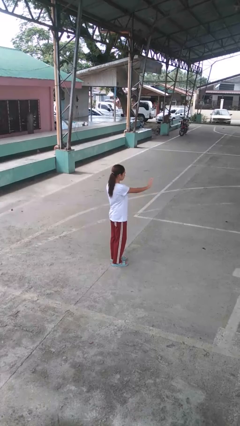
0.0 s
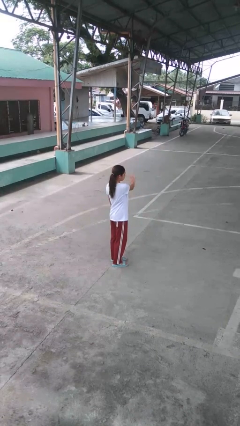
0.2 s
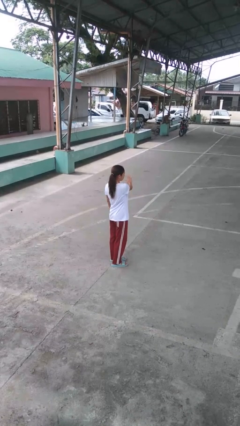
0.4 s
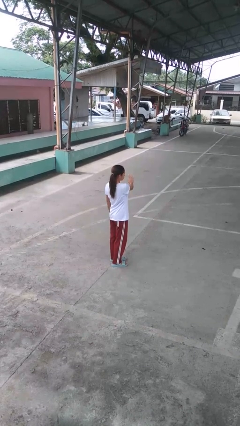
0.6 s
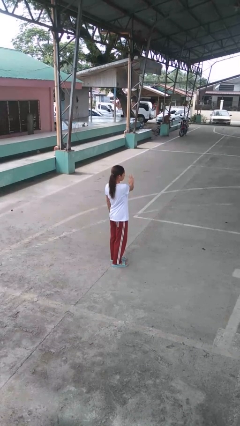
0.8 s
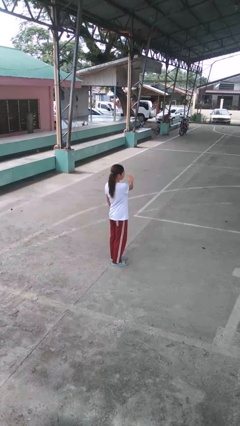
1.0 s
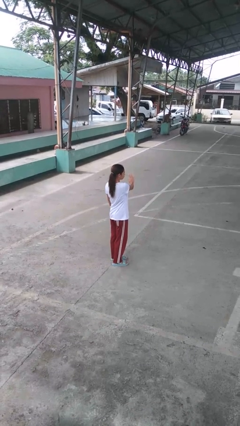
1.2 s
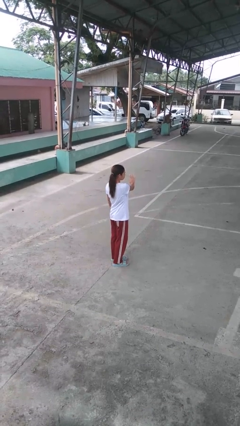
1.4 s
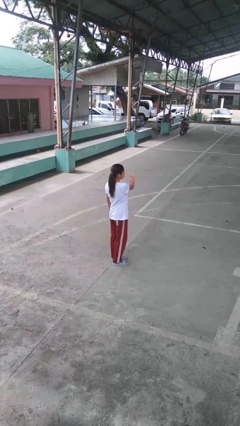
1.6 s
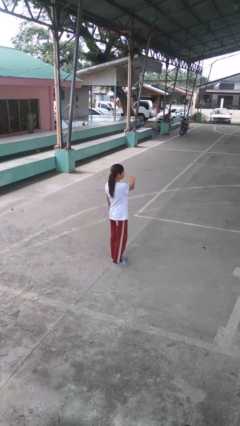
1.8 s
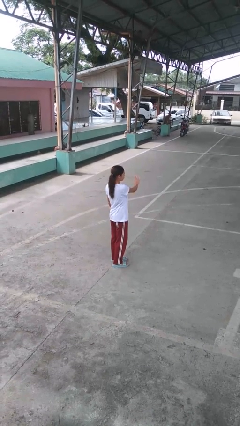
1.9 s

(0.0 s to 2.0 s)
person gestures swipe left

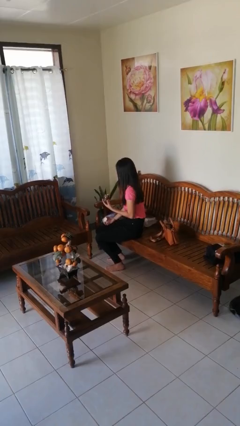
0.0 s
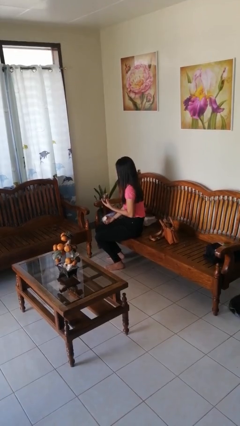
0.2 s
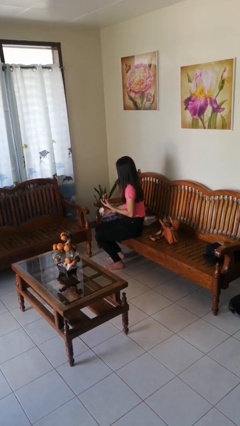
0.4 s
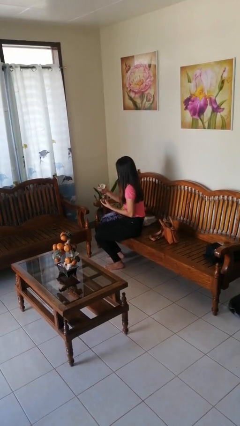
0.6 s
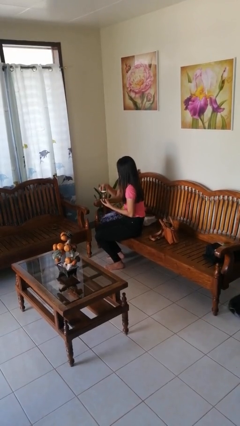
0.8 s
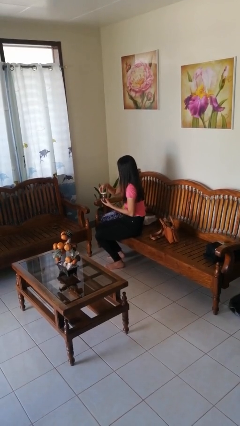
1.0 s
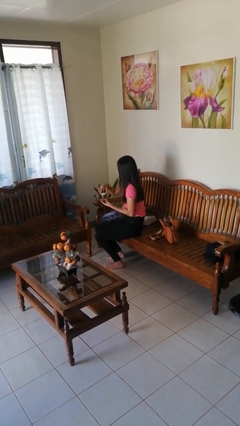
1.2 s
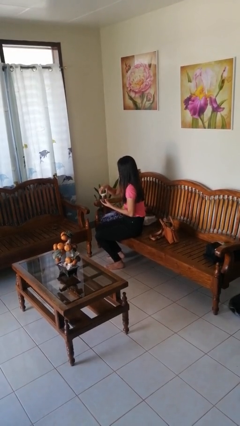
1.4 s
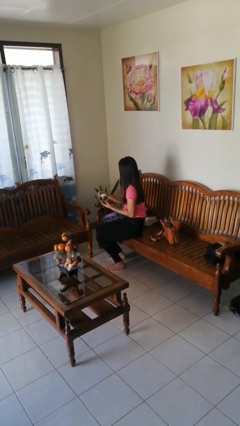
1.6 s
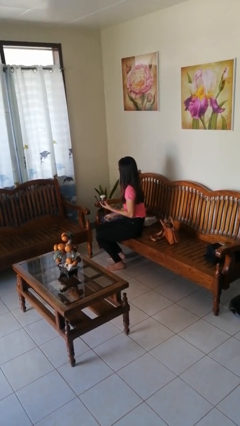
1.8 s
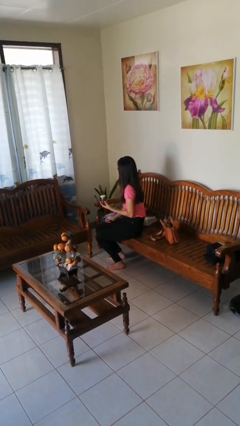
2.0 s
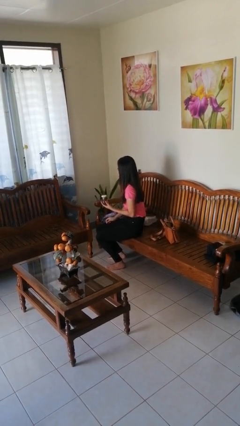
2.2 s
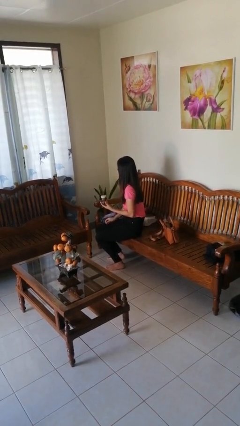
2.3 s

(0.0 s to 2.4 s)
person closes jar

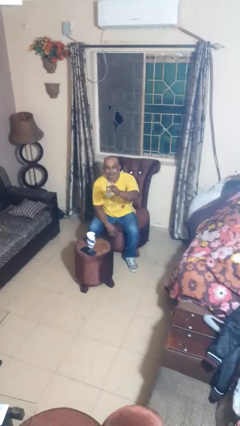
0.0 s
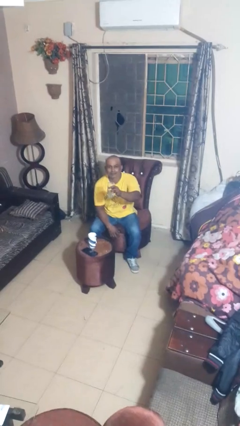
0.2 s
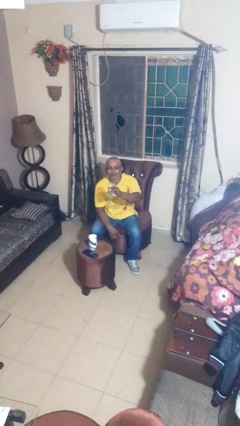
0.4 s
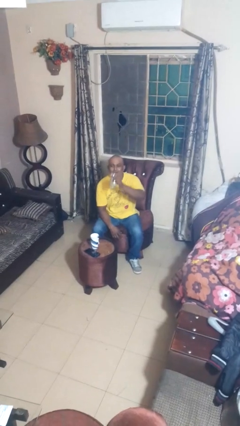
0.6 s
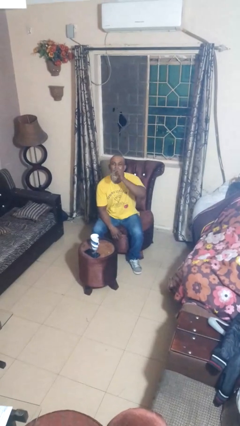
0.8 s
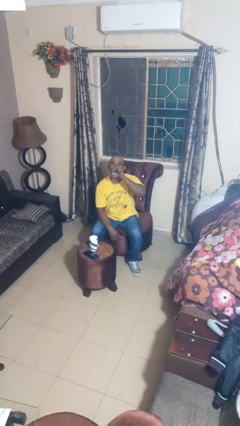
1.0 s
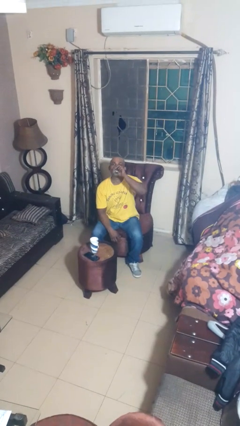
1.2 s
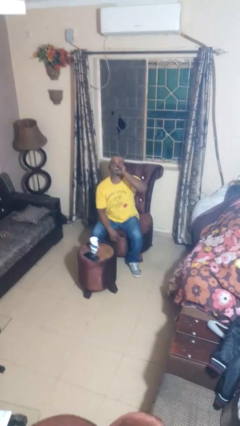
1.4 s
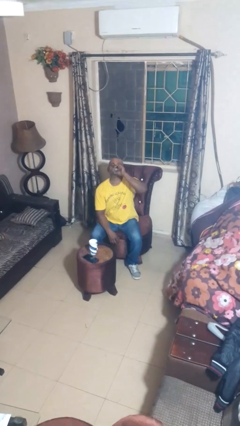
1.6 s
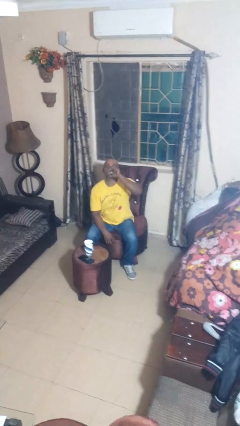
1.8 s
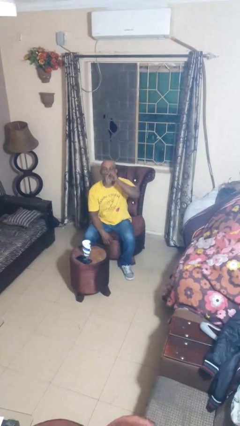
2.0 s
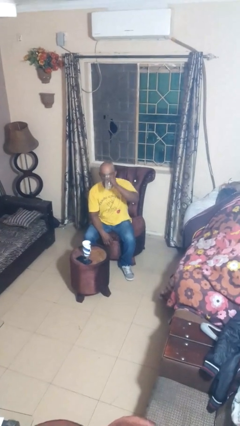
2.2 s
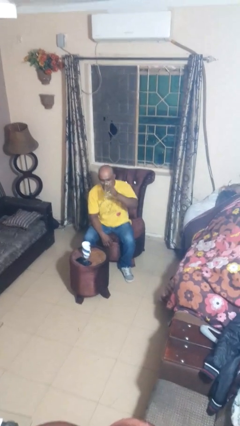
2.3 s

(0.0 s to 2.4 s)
person drinks from shotglass

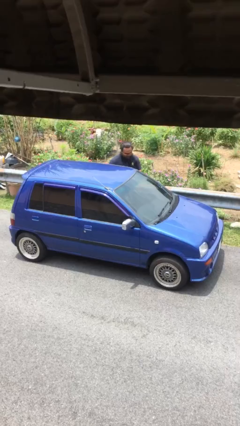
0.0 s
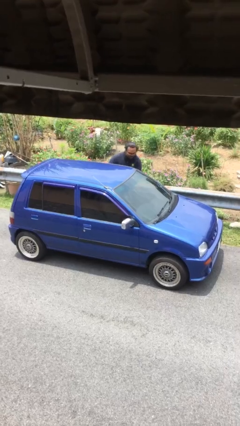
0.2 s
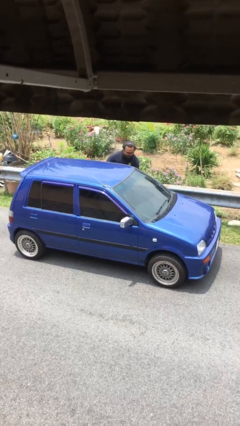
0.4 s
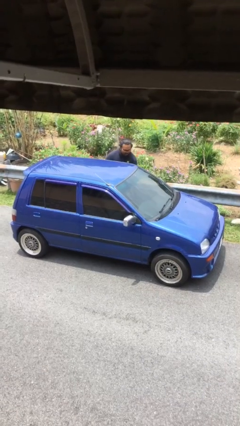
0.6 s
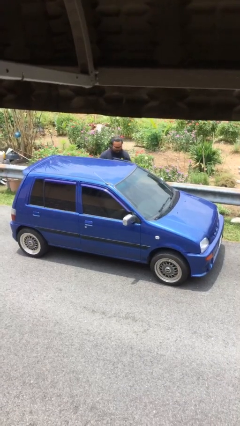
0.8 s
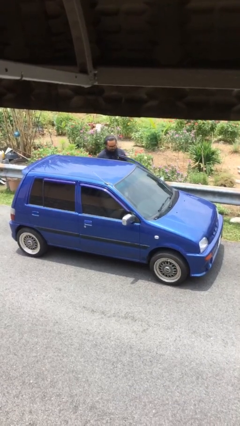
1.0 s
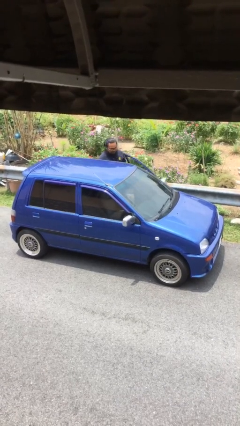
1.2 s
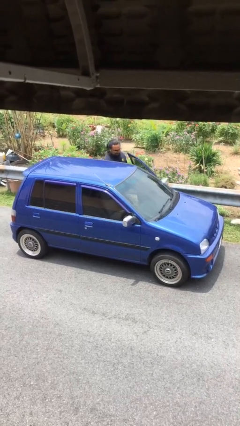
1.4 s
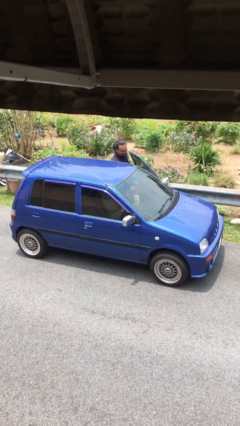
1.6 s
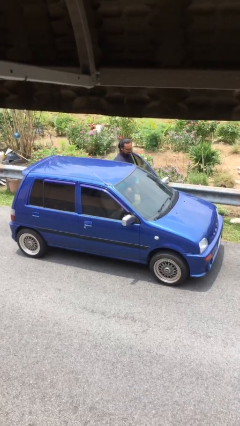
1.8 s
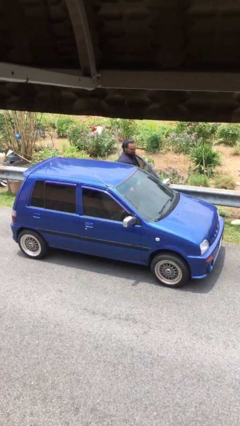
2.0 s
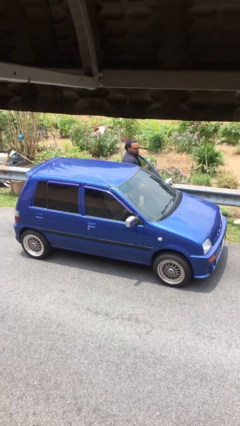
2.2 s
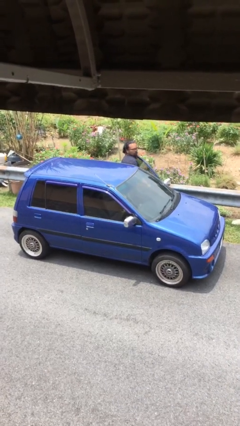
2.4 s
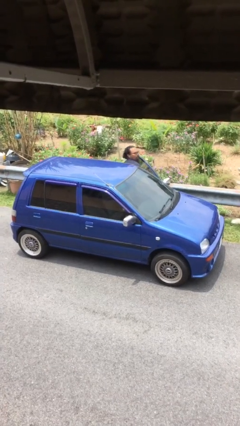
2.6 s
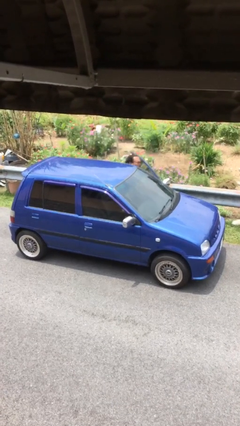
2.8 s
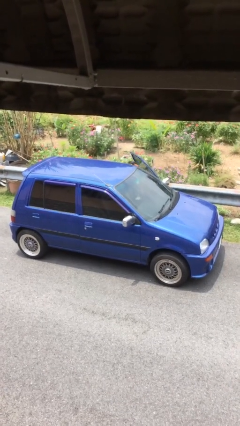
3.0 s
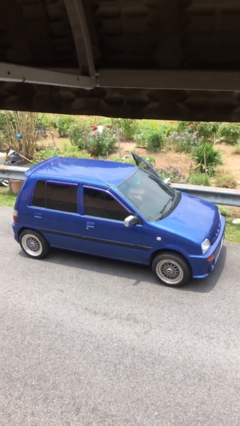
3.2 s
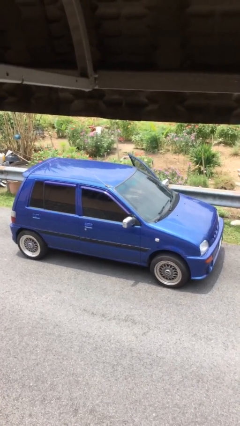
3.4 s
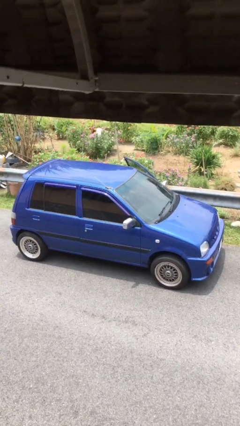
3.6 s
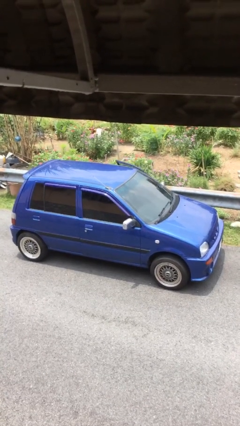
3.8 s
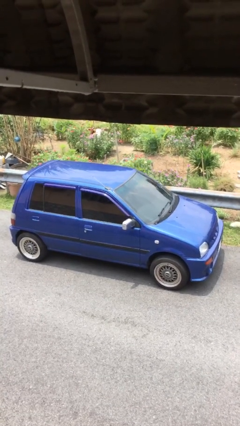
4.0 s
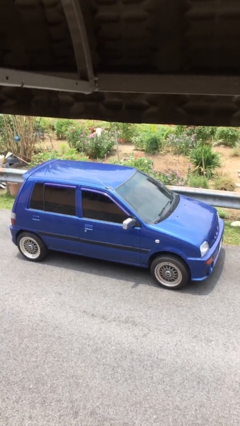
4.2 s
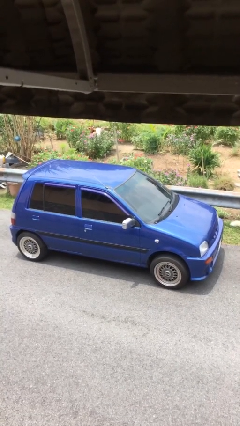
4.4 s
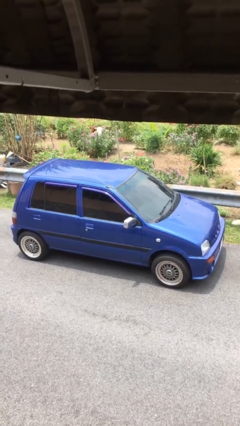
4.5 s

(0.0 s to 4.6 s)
car picks up person

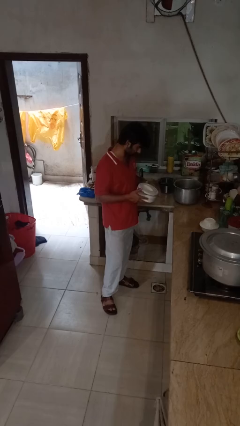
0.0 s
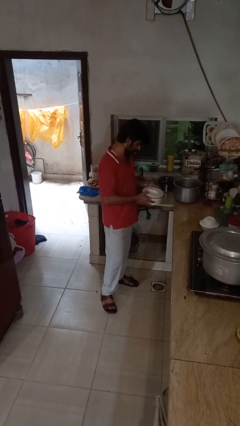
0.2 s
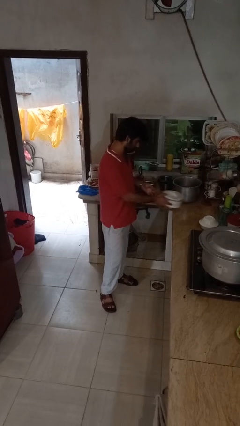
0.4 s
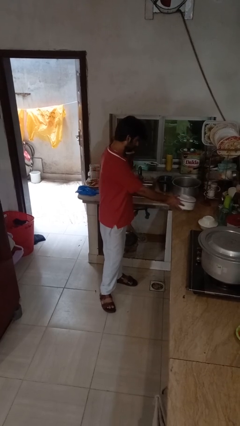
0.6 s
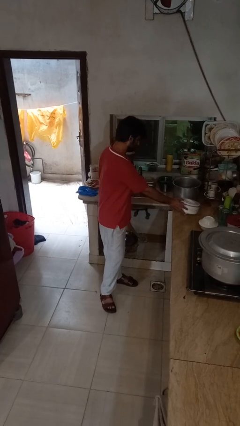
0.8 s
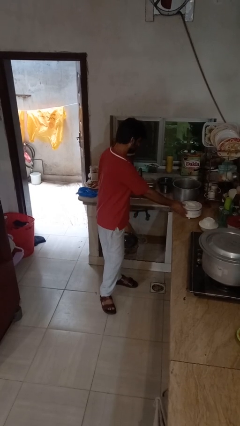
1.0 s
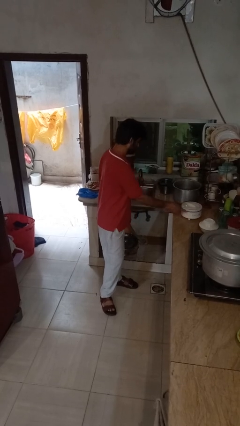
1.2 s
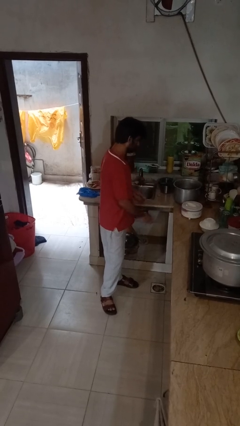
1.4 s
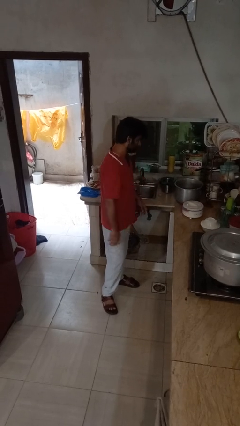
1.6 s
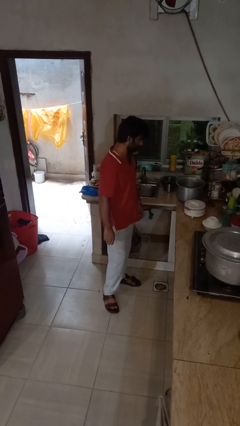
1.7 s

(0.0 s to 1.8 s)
person puts down object on countertop

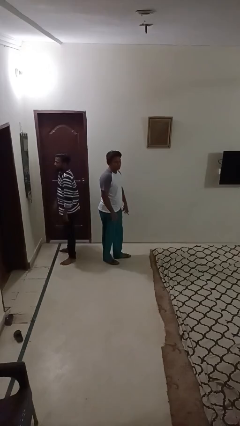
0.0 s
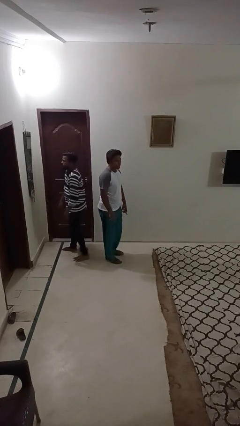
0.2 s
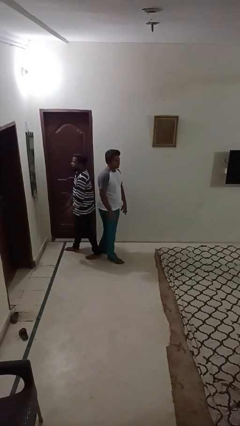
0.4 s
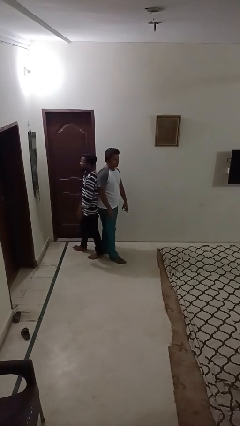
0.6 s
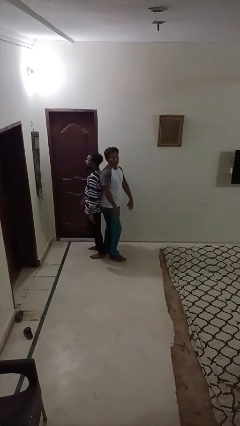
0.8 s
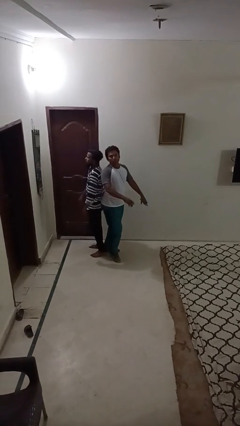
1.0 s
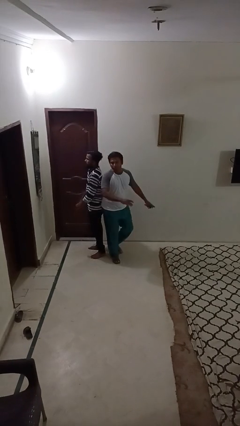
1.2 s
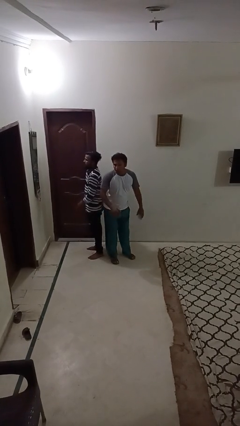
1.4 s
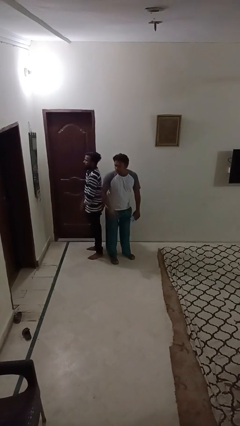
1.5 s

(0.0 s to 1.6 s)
person bumps into person

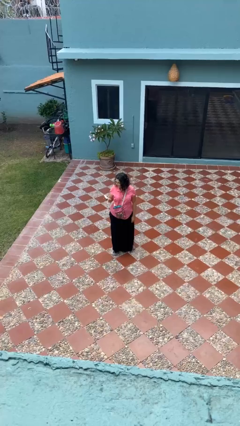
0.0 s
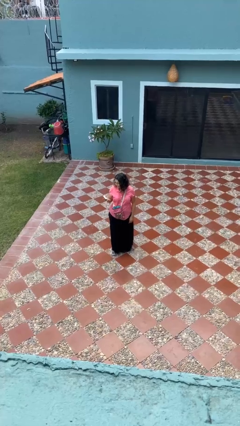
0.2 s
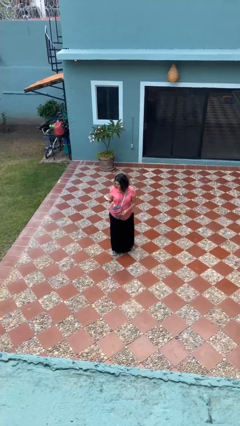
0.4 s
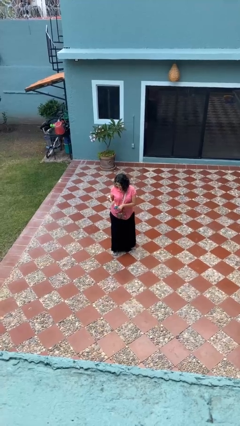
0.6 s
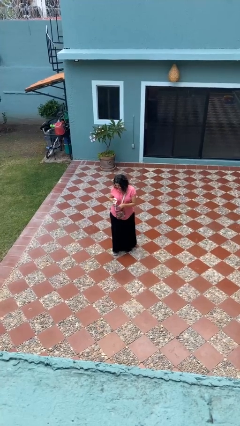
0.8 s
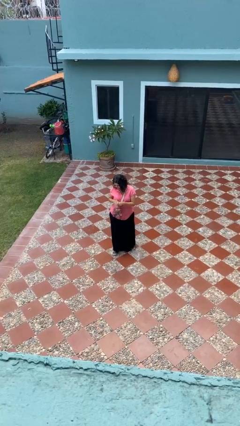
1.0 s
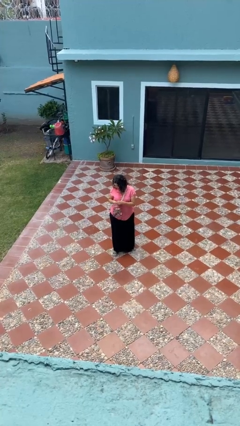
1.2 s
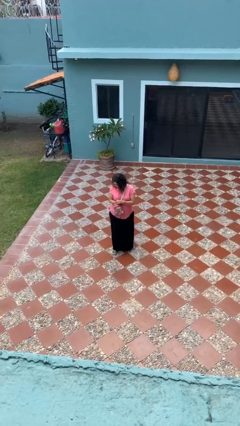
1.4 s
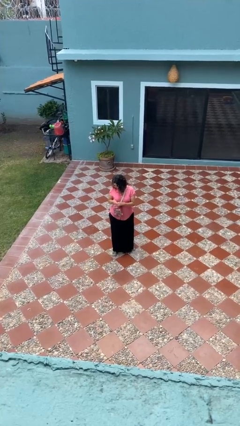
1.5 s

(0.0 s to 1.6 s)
person puts object into purse

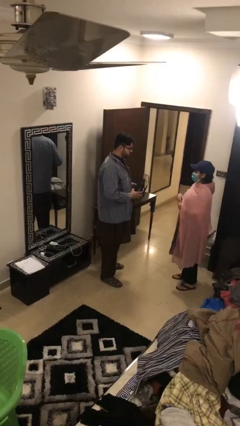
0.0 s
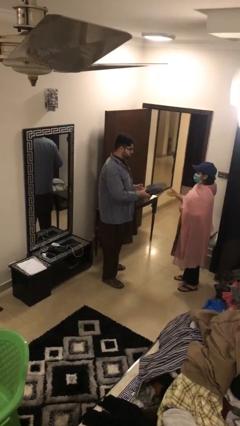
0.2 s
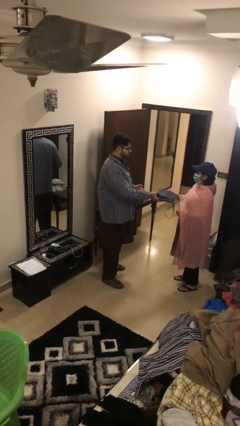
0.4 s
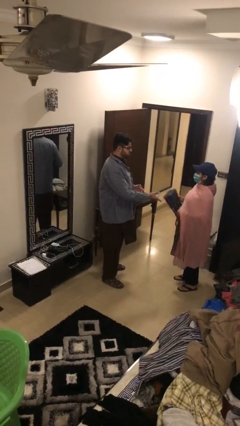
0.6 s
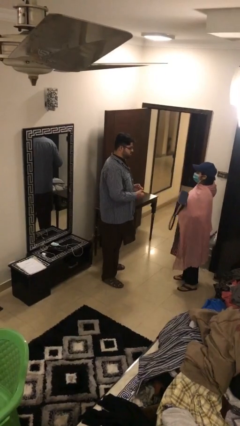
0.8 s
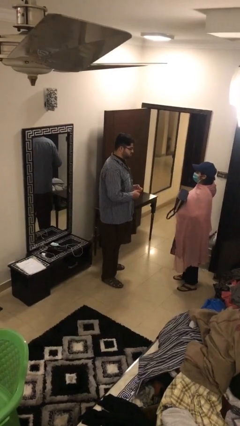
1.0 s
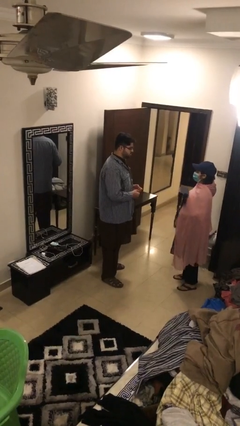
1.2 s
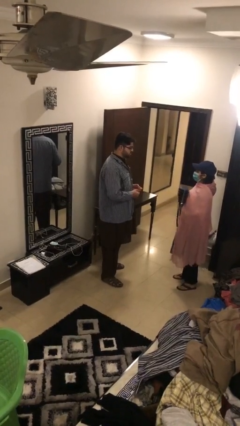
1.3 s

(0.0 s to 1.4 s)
person transfers object to person
